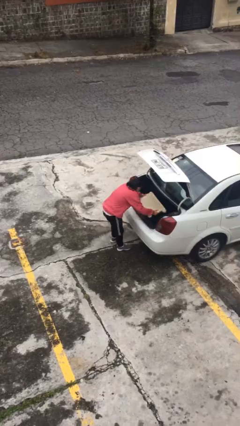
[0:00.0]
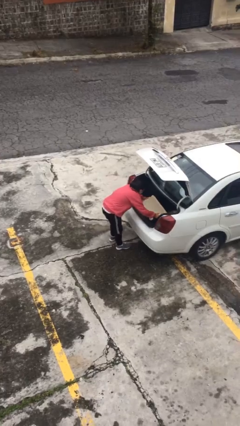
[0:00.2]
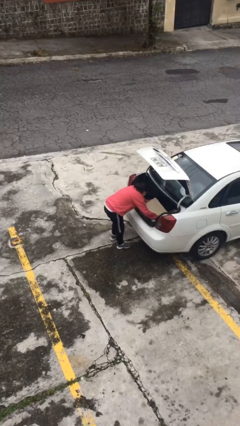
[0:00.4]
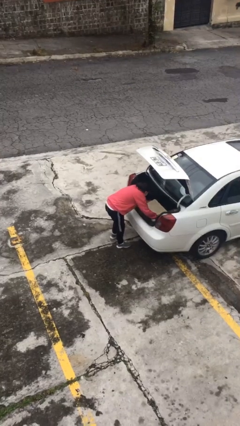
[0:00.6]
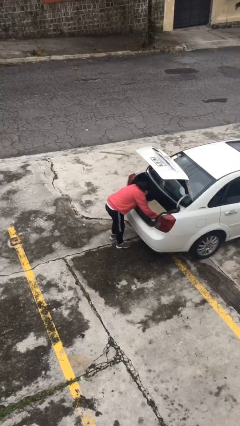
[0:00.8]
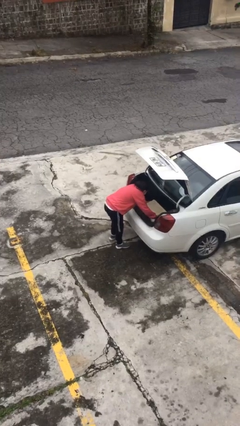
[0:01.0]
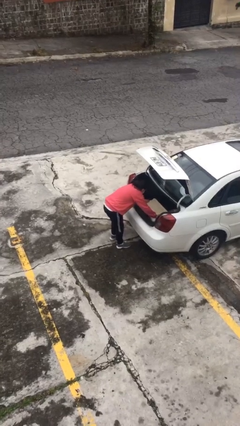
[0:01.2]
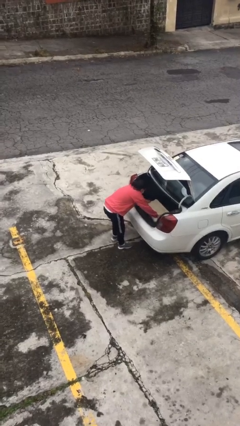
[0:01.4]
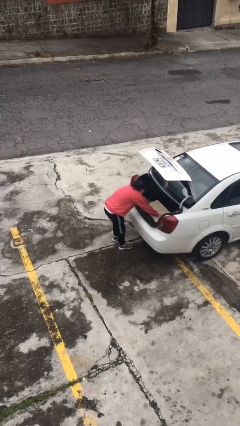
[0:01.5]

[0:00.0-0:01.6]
person loads car

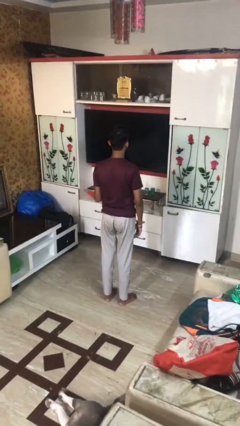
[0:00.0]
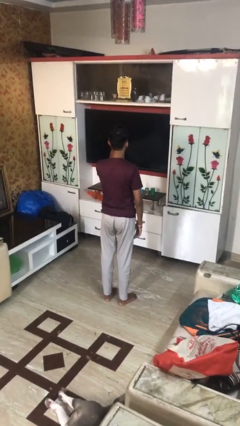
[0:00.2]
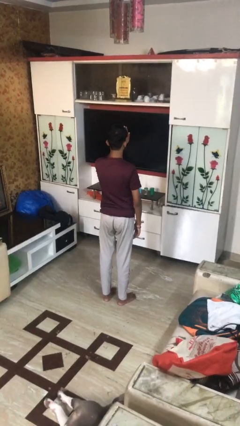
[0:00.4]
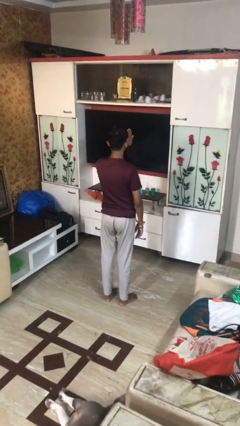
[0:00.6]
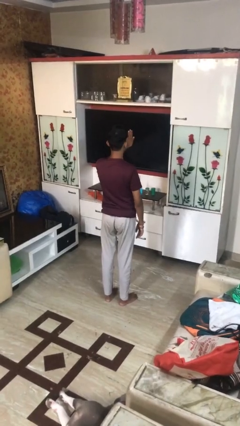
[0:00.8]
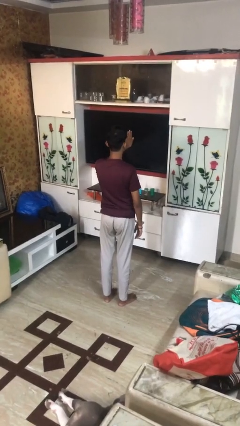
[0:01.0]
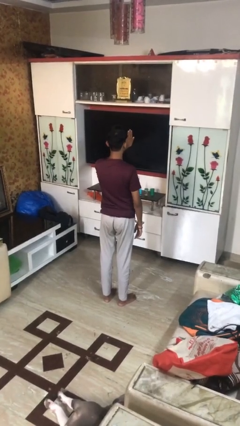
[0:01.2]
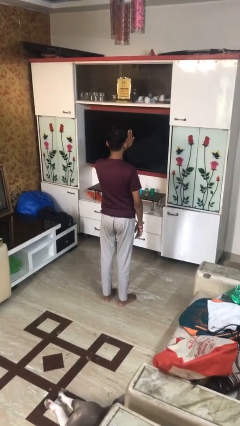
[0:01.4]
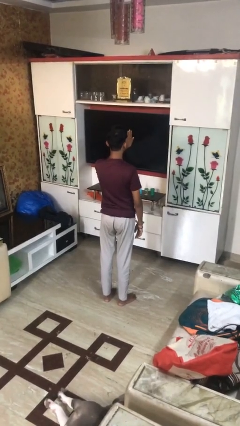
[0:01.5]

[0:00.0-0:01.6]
person gestures stop

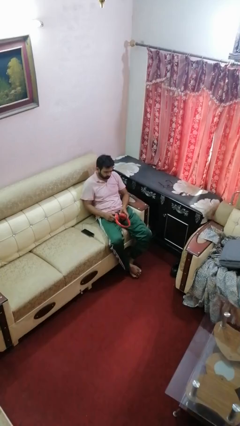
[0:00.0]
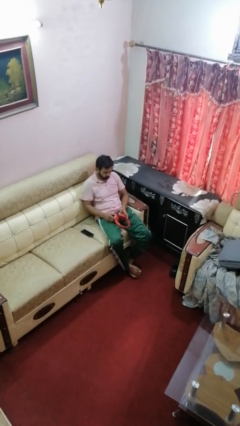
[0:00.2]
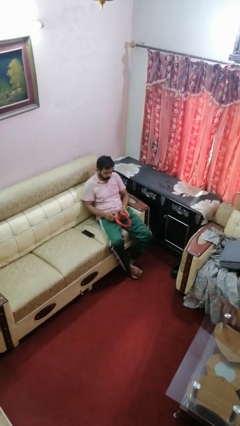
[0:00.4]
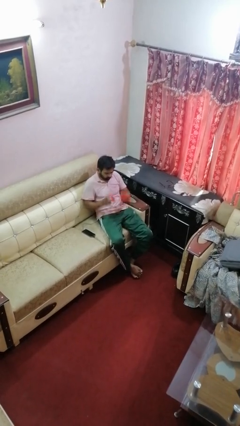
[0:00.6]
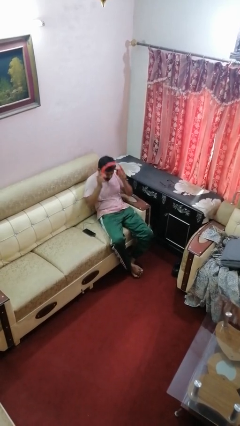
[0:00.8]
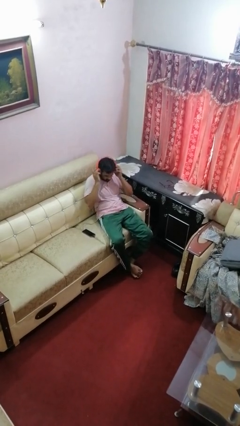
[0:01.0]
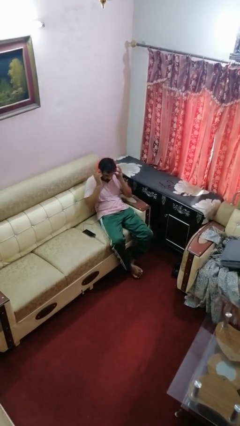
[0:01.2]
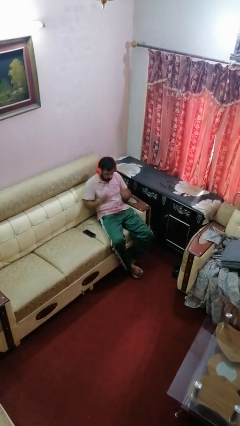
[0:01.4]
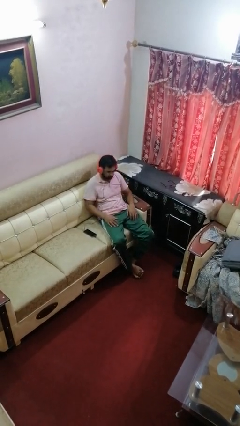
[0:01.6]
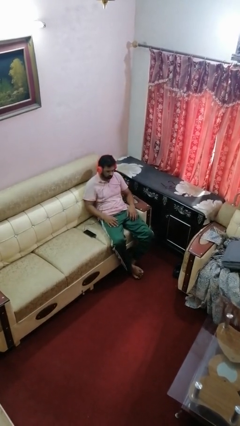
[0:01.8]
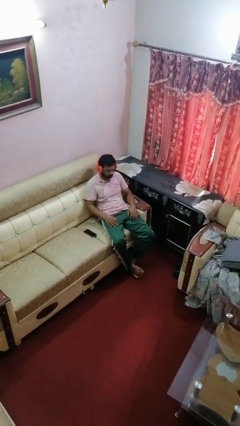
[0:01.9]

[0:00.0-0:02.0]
person puts on headphones

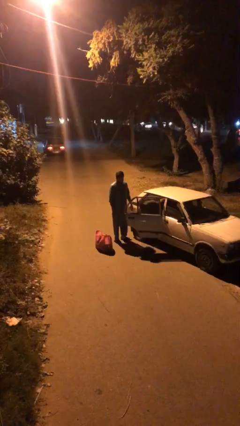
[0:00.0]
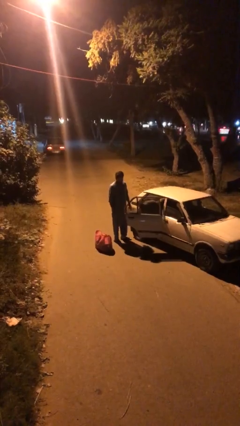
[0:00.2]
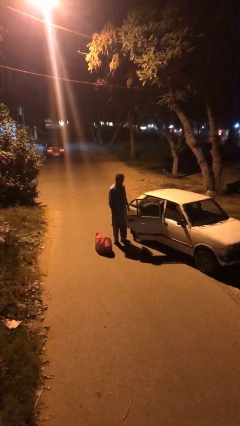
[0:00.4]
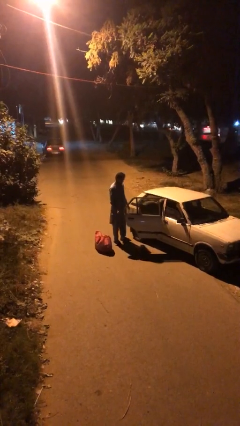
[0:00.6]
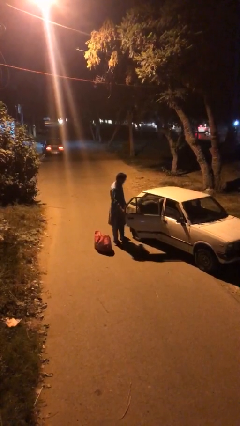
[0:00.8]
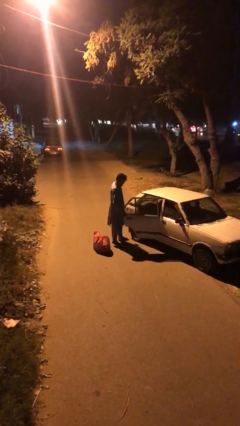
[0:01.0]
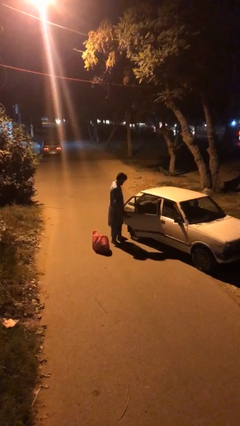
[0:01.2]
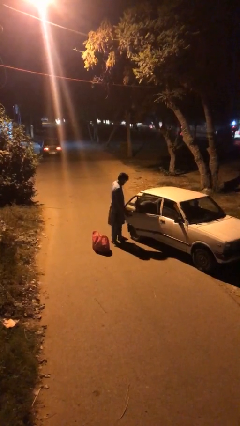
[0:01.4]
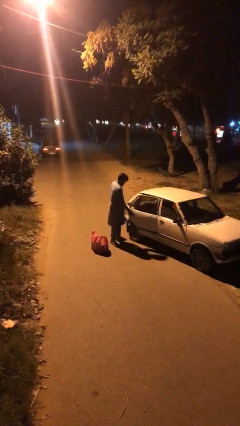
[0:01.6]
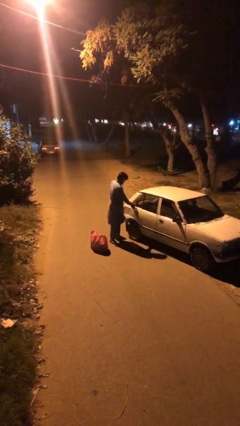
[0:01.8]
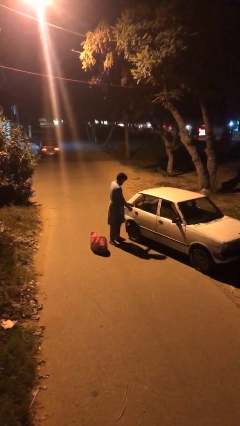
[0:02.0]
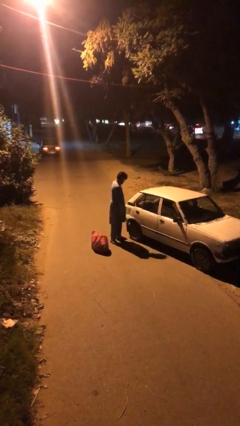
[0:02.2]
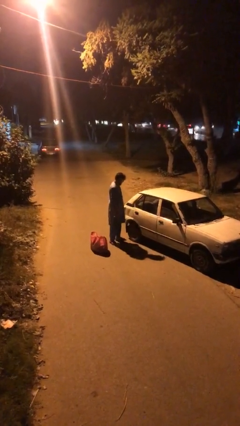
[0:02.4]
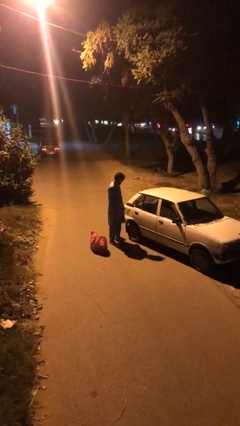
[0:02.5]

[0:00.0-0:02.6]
person closes car door

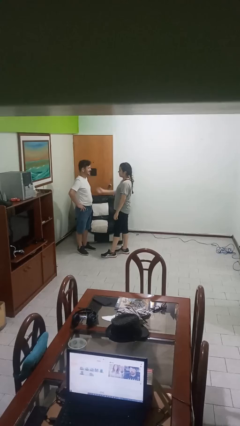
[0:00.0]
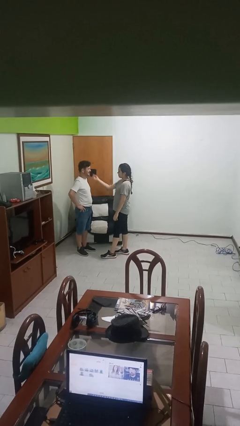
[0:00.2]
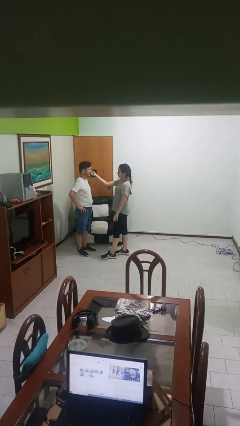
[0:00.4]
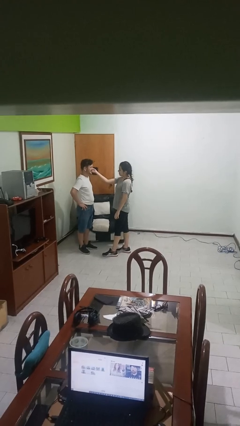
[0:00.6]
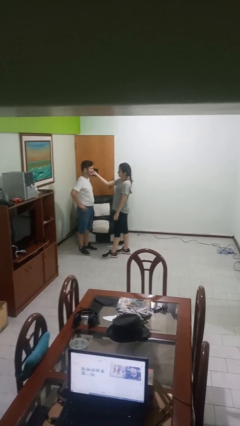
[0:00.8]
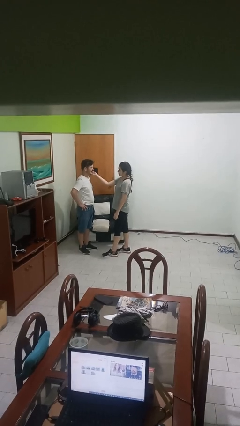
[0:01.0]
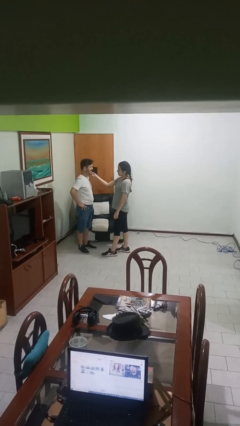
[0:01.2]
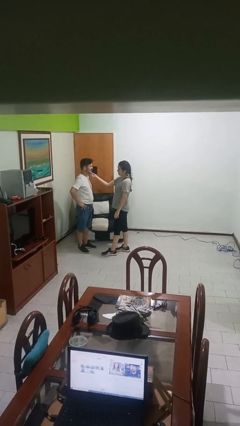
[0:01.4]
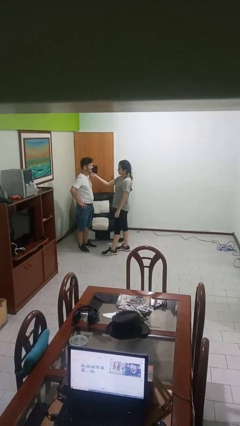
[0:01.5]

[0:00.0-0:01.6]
person touches face of person

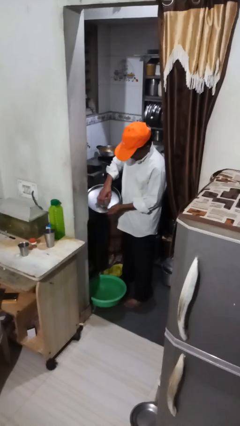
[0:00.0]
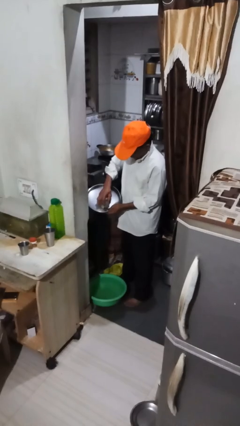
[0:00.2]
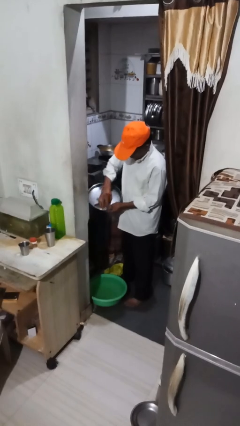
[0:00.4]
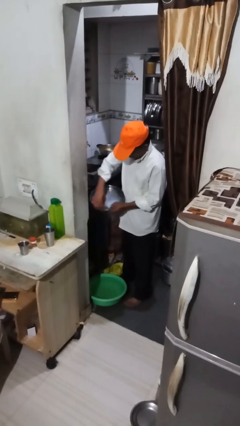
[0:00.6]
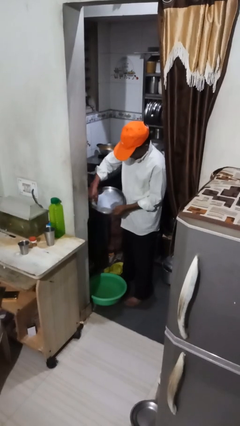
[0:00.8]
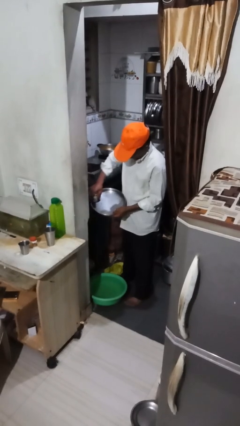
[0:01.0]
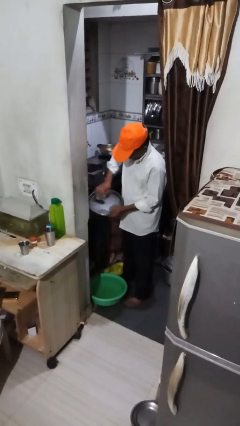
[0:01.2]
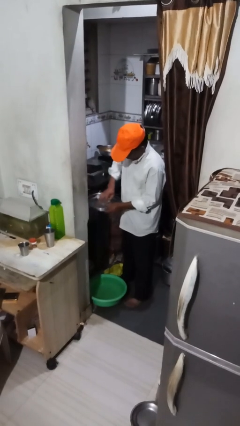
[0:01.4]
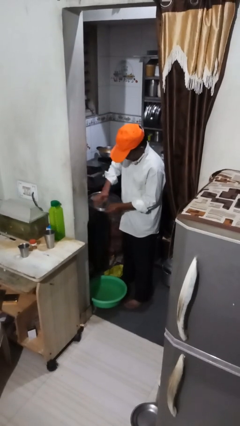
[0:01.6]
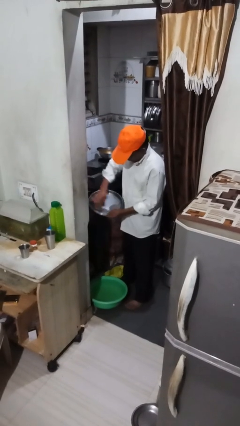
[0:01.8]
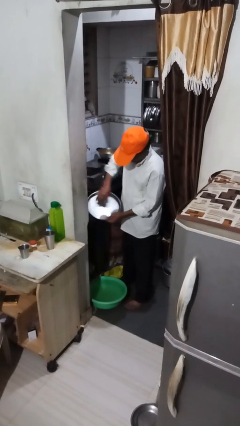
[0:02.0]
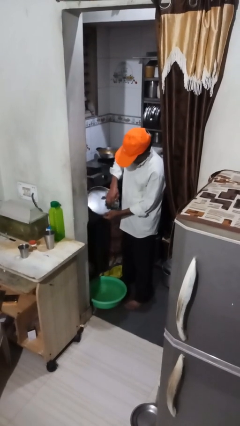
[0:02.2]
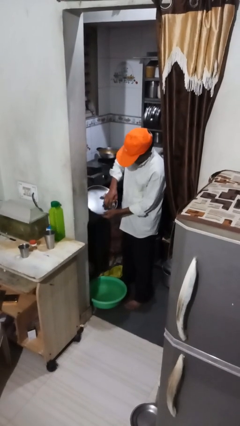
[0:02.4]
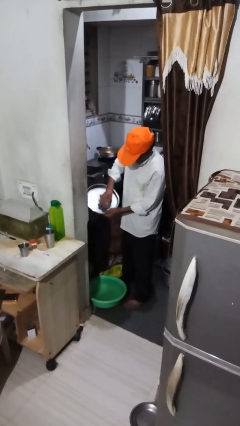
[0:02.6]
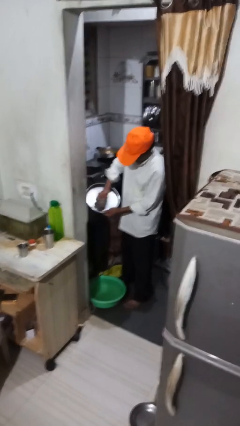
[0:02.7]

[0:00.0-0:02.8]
person dries dish

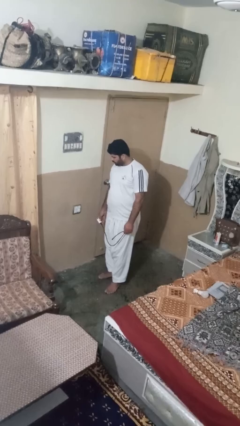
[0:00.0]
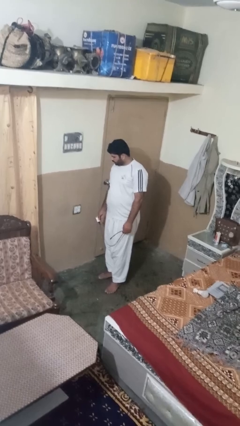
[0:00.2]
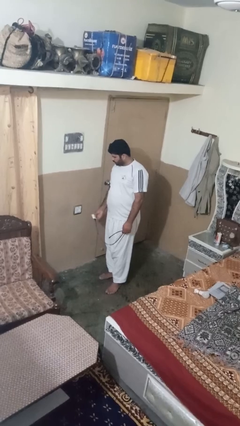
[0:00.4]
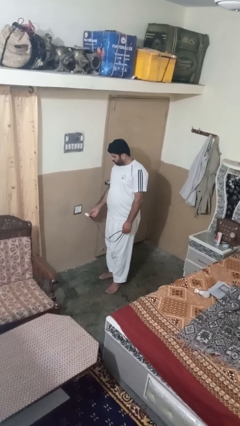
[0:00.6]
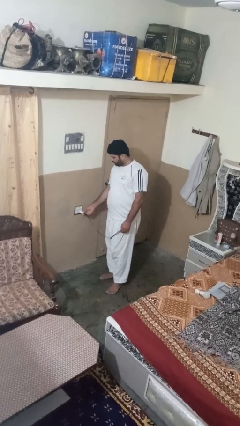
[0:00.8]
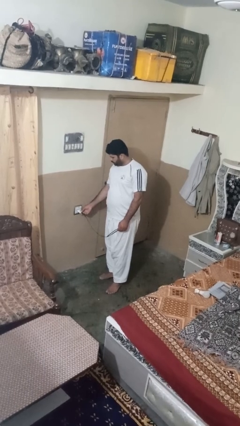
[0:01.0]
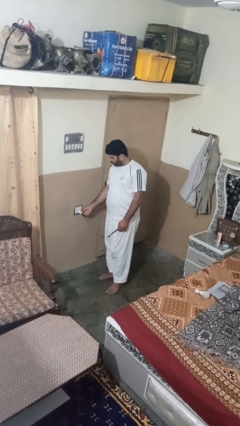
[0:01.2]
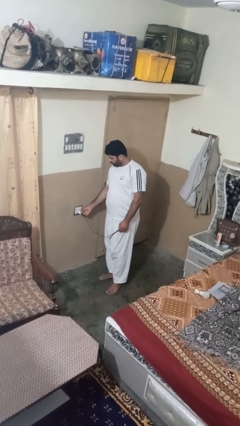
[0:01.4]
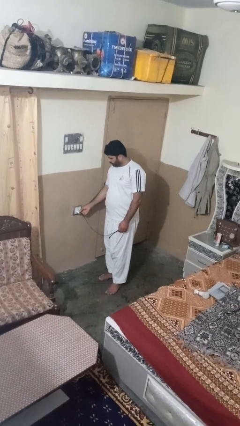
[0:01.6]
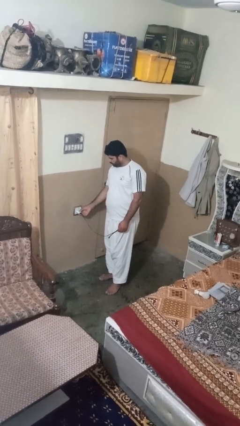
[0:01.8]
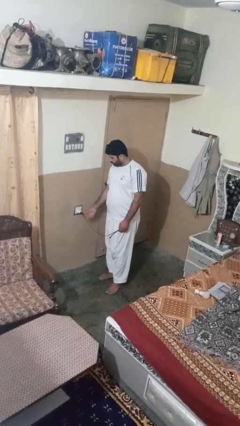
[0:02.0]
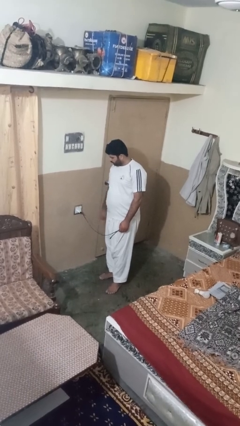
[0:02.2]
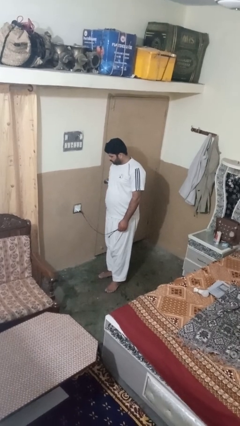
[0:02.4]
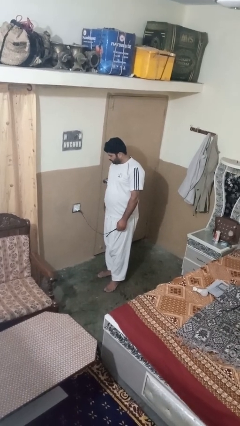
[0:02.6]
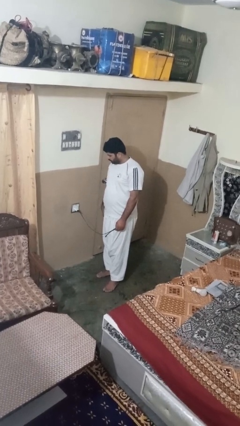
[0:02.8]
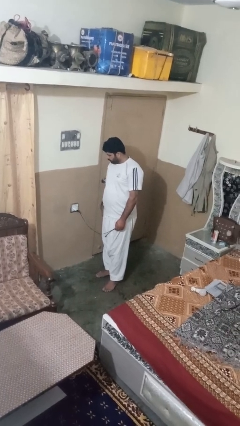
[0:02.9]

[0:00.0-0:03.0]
person plugs into electrical socket

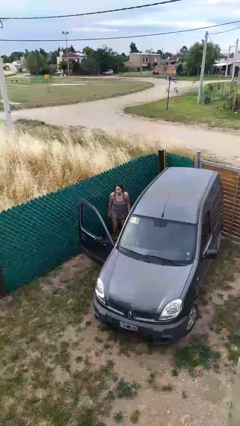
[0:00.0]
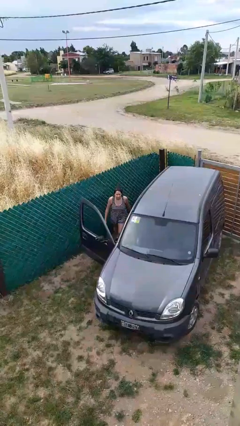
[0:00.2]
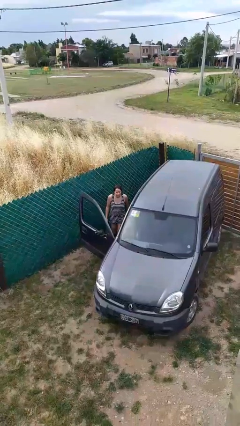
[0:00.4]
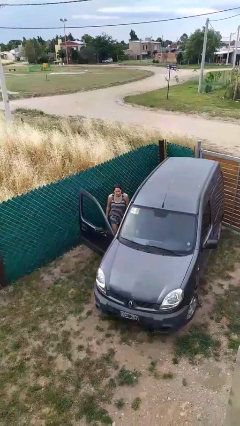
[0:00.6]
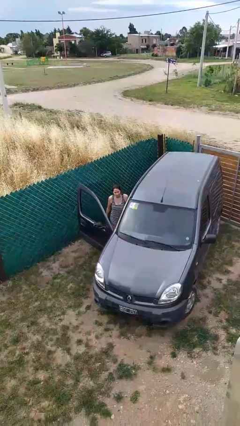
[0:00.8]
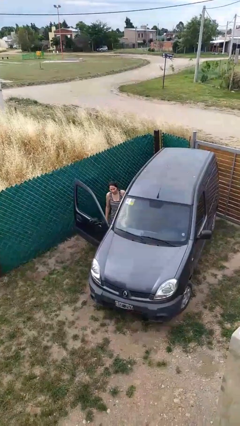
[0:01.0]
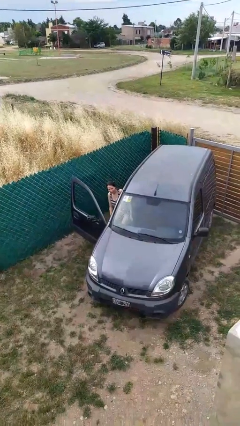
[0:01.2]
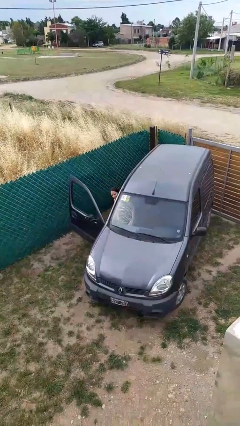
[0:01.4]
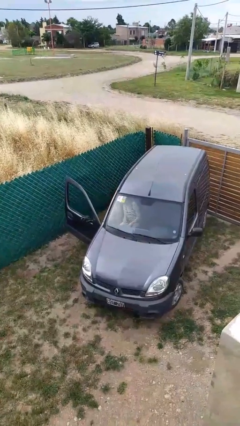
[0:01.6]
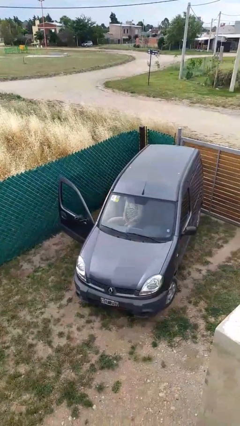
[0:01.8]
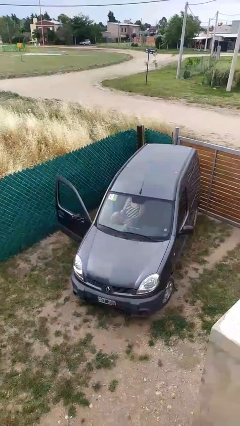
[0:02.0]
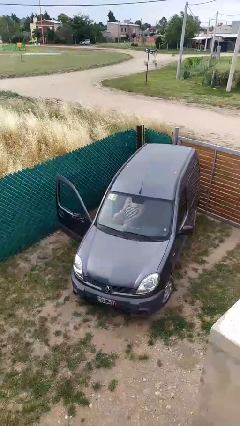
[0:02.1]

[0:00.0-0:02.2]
person enters car
